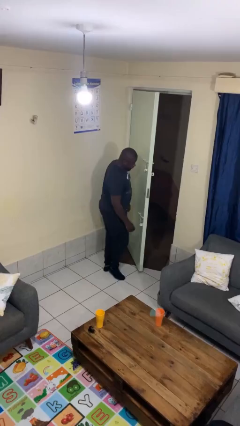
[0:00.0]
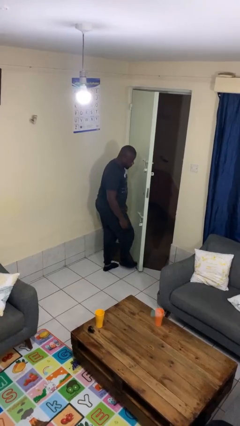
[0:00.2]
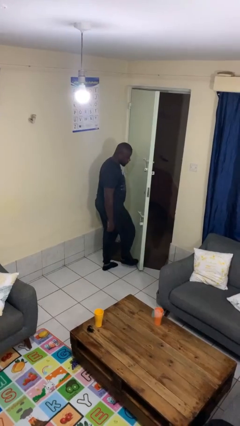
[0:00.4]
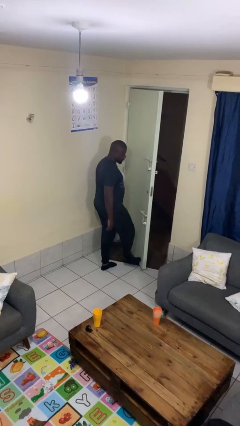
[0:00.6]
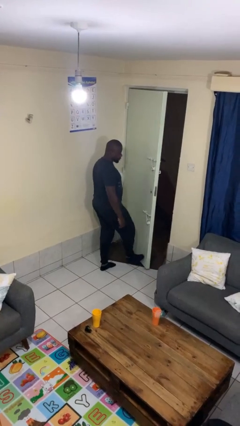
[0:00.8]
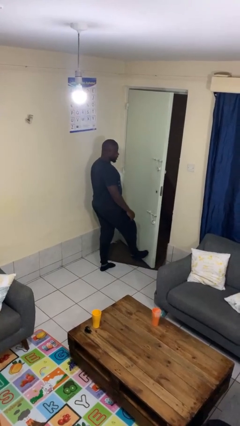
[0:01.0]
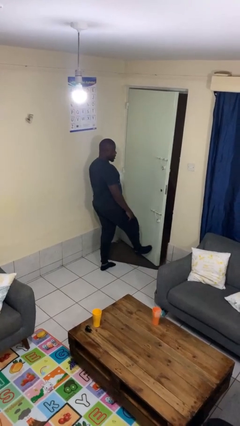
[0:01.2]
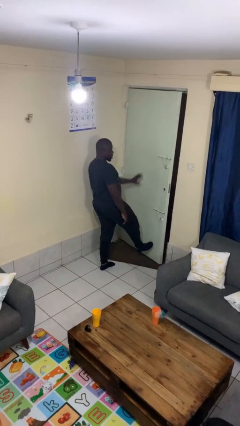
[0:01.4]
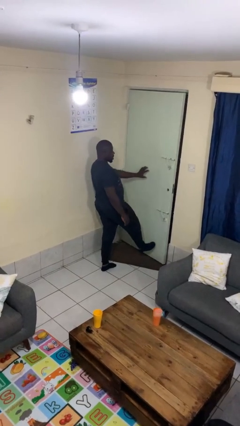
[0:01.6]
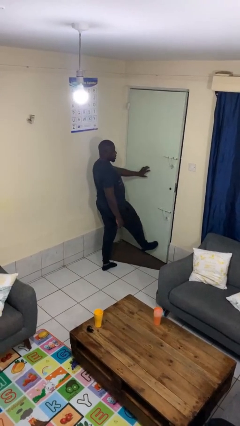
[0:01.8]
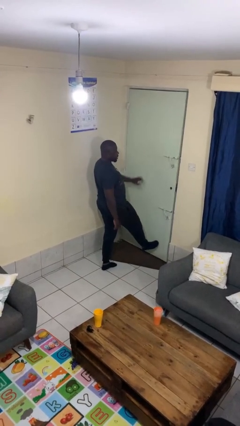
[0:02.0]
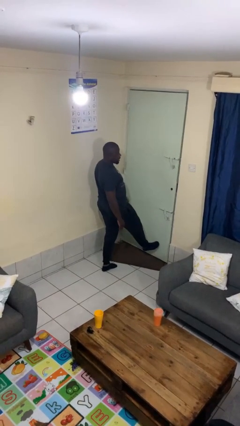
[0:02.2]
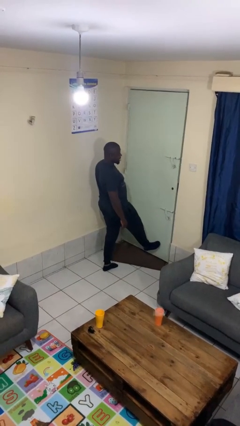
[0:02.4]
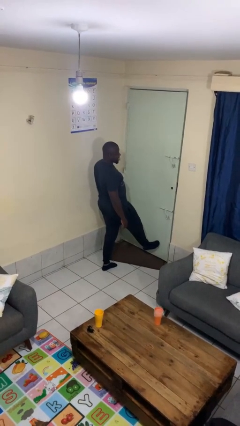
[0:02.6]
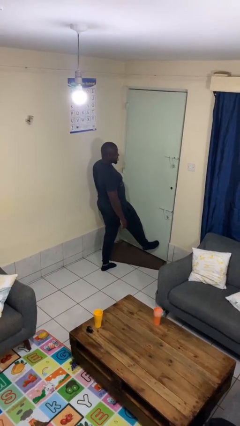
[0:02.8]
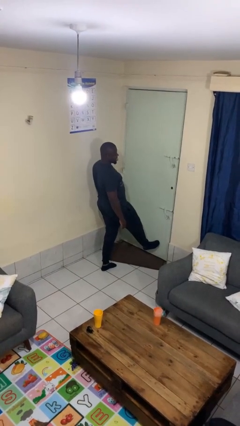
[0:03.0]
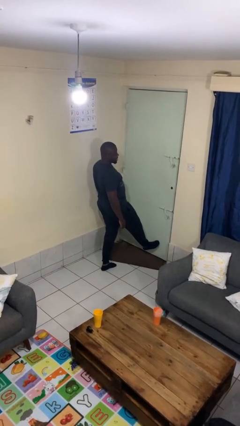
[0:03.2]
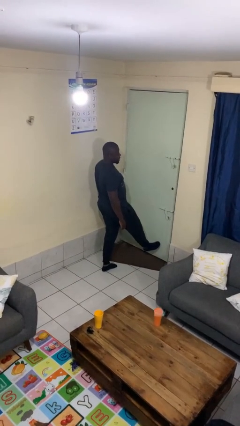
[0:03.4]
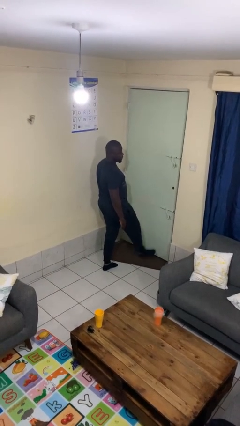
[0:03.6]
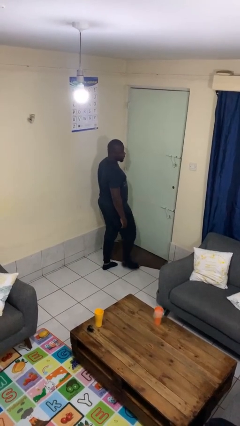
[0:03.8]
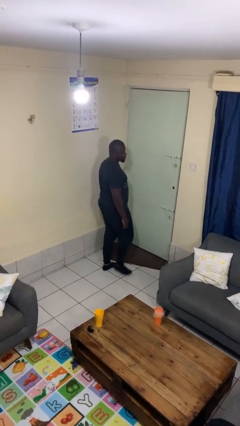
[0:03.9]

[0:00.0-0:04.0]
person closes door with foot

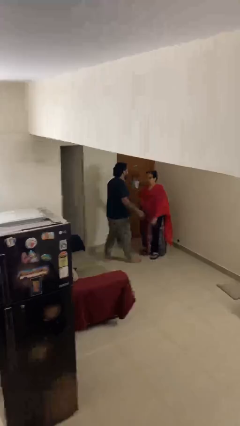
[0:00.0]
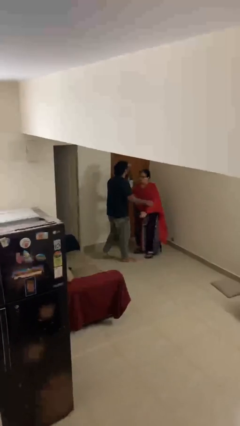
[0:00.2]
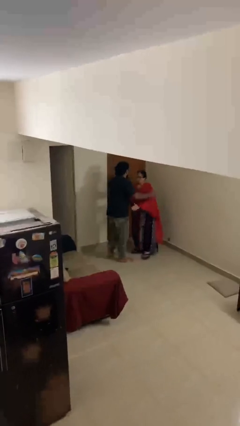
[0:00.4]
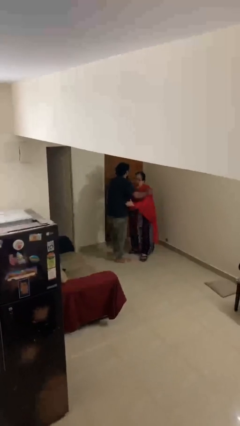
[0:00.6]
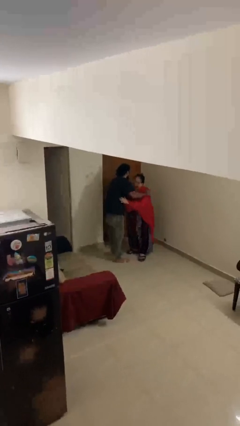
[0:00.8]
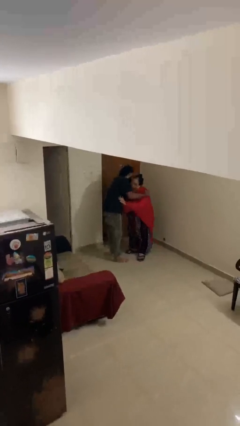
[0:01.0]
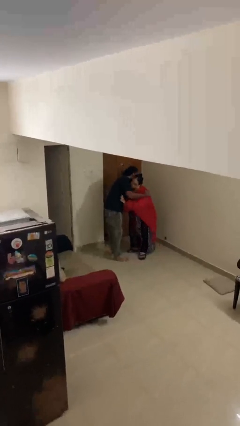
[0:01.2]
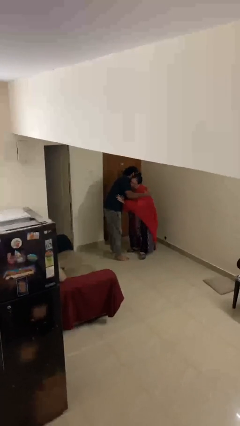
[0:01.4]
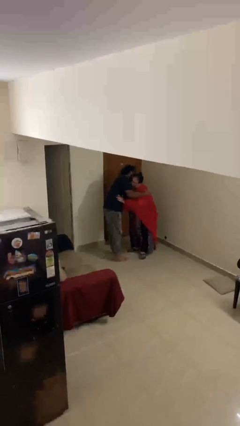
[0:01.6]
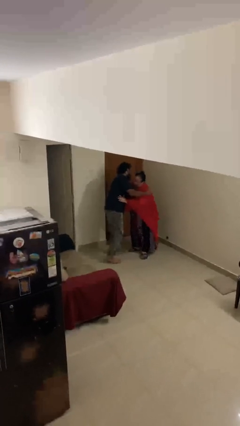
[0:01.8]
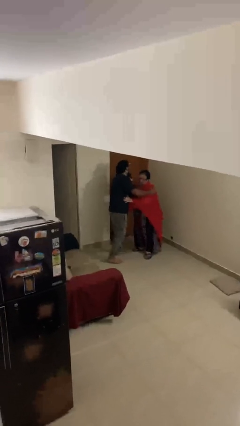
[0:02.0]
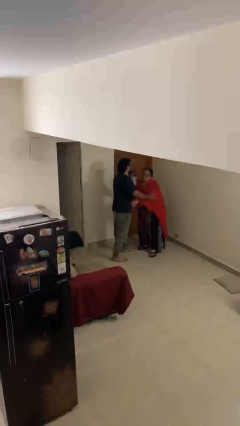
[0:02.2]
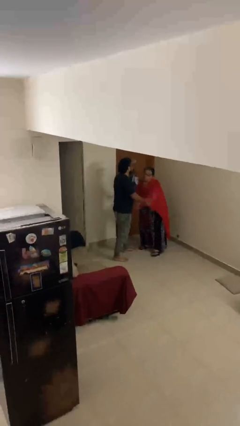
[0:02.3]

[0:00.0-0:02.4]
person embraces person

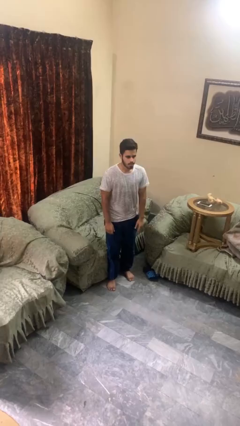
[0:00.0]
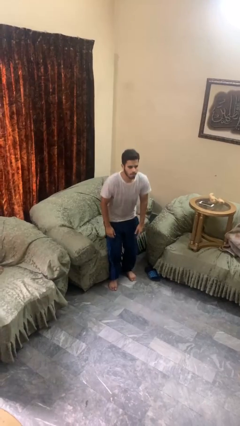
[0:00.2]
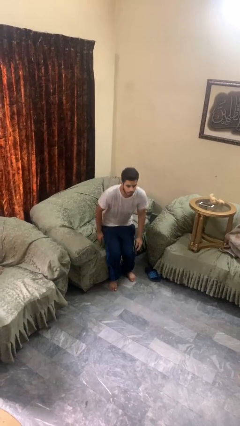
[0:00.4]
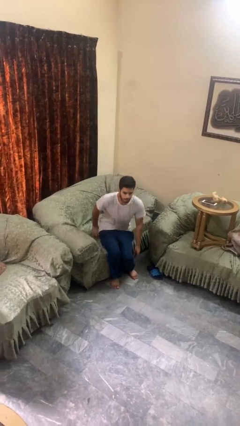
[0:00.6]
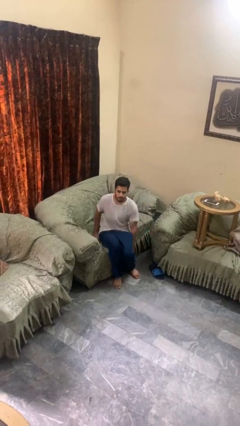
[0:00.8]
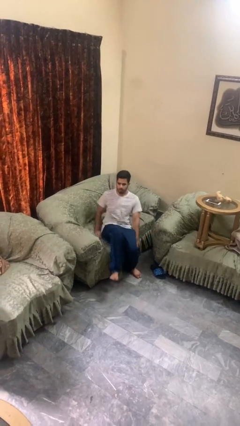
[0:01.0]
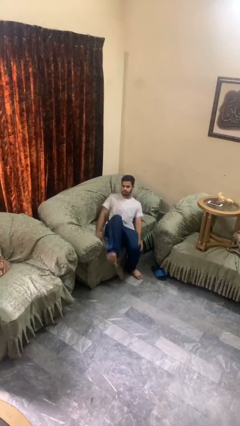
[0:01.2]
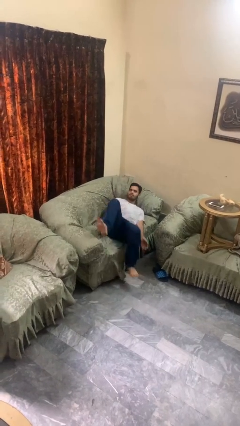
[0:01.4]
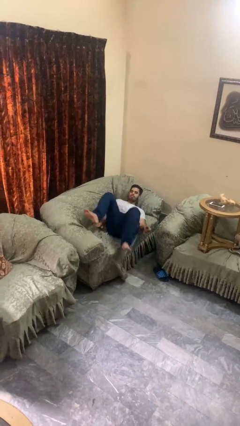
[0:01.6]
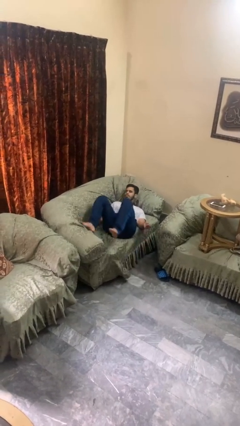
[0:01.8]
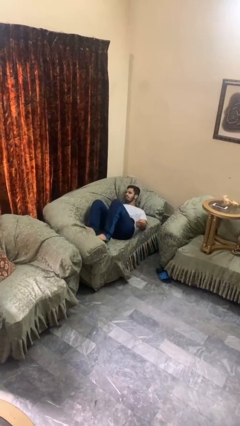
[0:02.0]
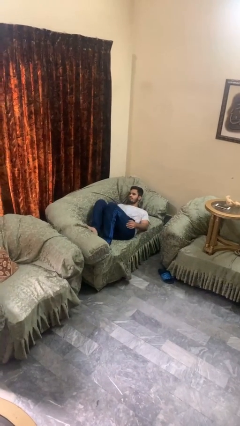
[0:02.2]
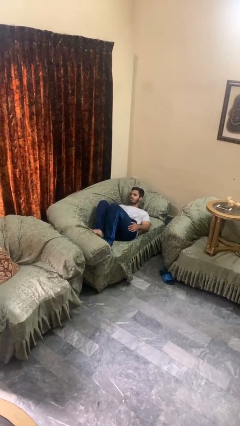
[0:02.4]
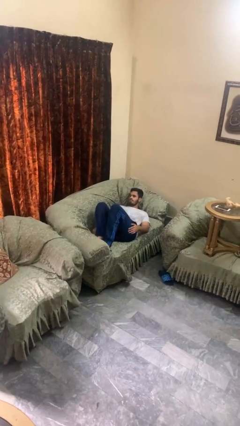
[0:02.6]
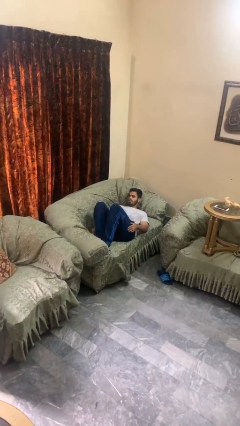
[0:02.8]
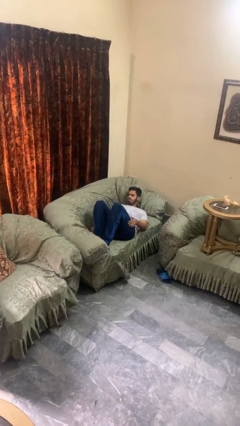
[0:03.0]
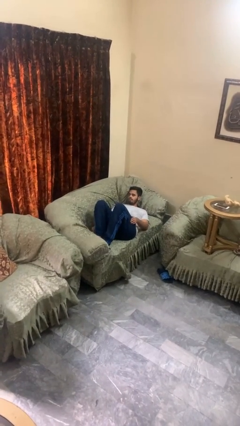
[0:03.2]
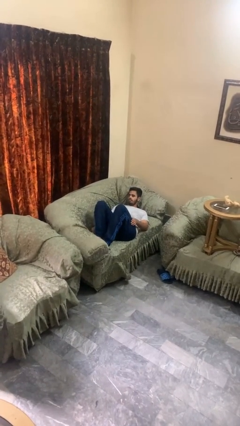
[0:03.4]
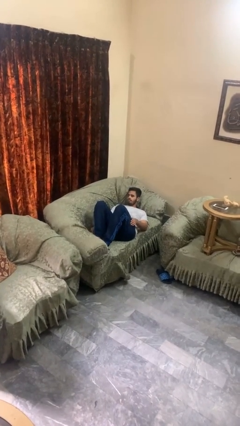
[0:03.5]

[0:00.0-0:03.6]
person lies down on couch

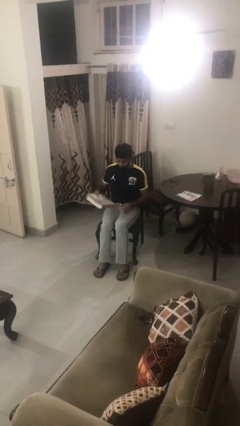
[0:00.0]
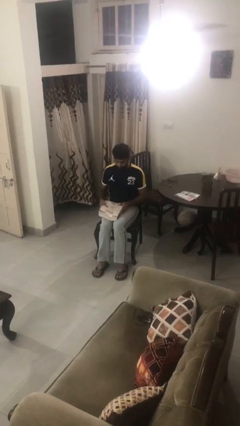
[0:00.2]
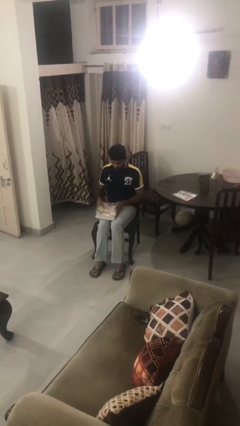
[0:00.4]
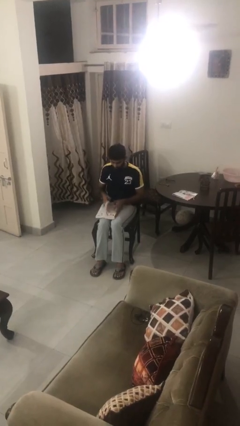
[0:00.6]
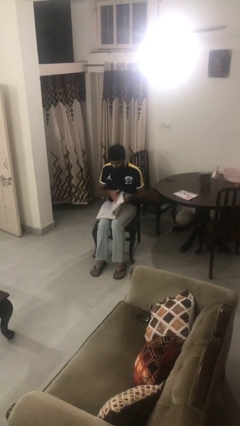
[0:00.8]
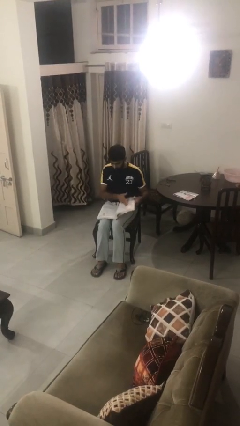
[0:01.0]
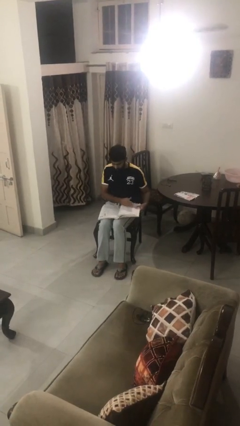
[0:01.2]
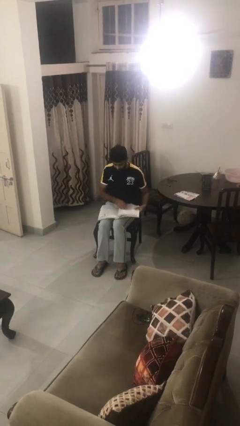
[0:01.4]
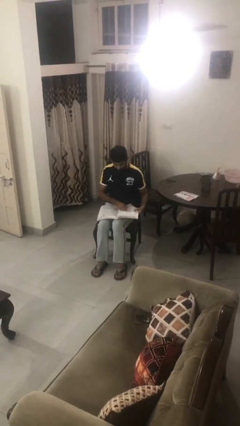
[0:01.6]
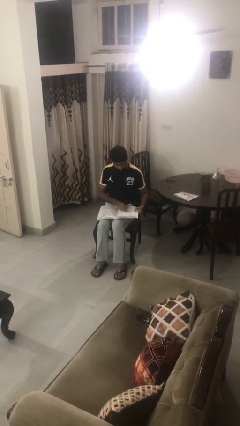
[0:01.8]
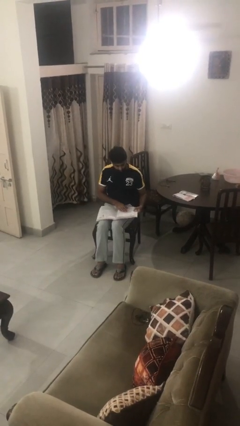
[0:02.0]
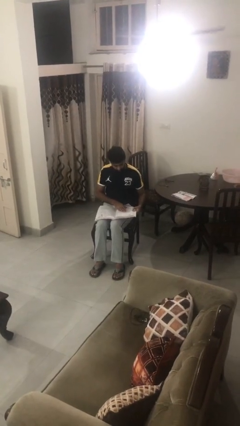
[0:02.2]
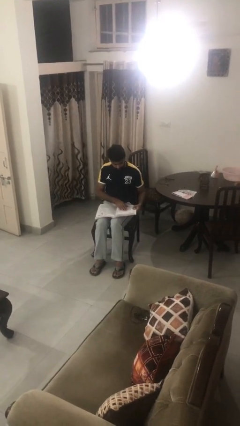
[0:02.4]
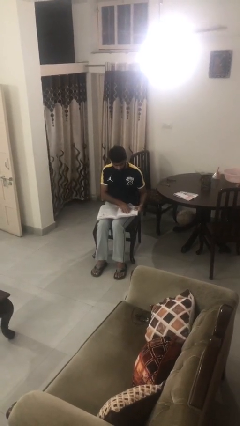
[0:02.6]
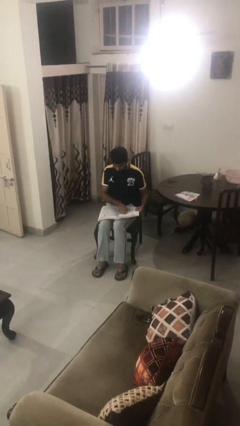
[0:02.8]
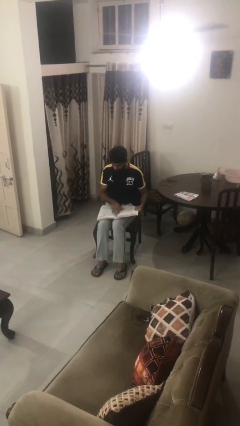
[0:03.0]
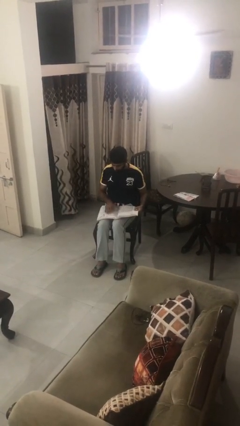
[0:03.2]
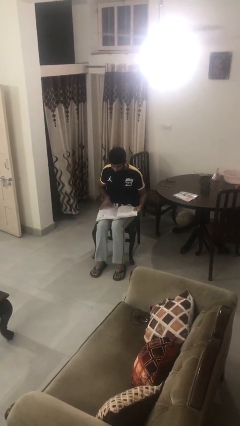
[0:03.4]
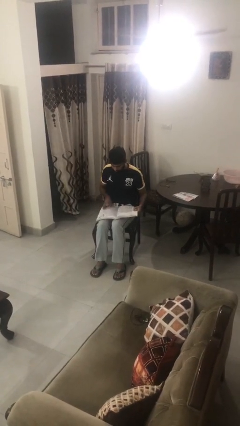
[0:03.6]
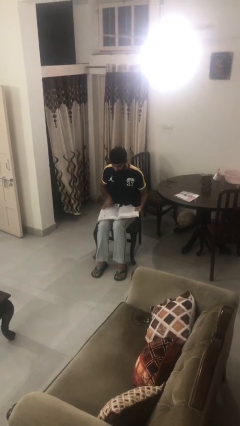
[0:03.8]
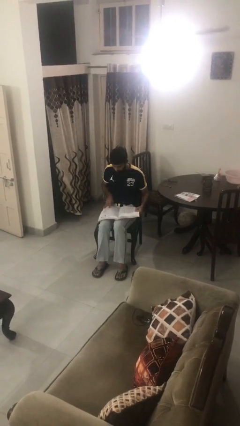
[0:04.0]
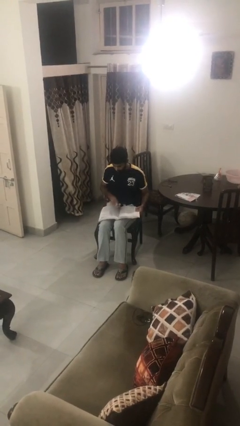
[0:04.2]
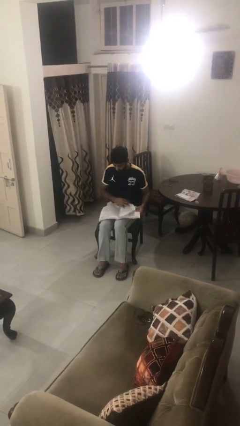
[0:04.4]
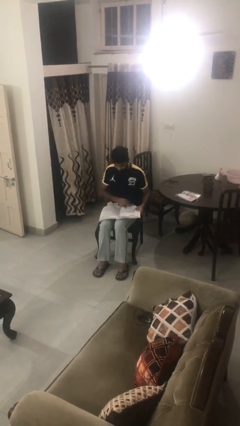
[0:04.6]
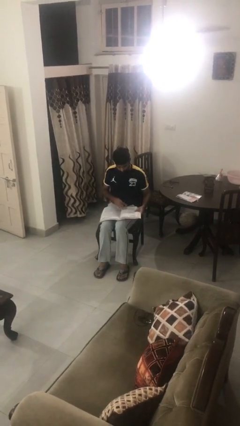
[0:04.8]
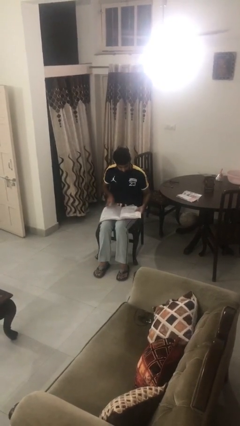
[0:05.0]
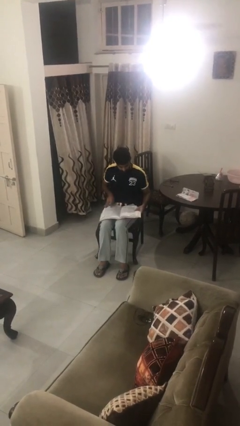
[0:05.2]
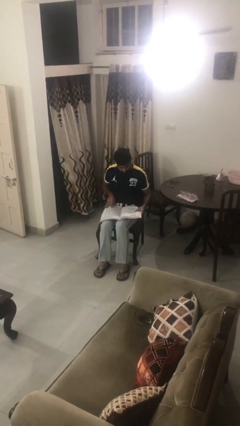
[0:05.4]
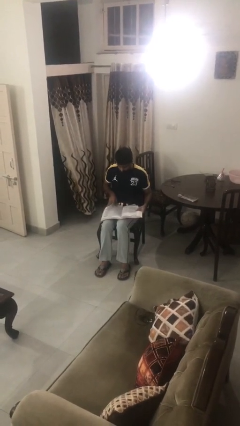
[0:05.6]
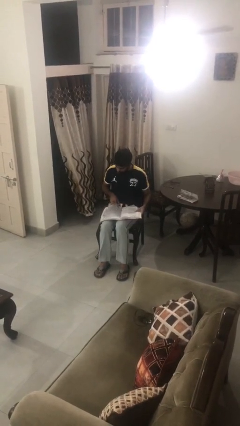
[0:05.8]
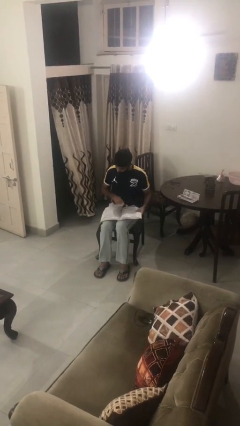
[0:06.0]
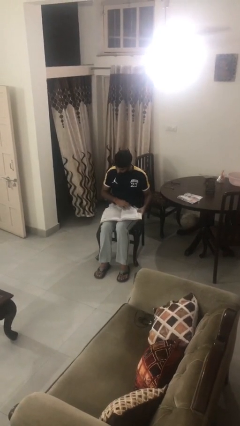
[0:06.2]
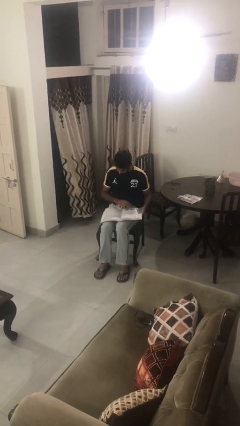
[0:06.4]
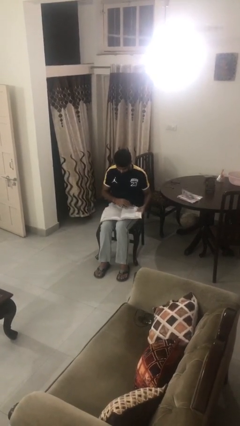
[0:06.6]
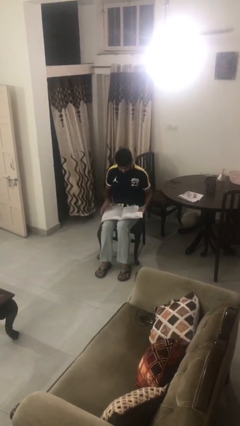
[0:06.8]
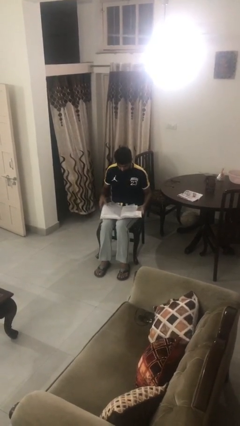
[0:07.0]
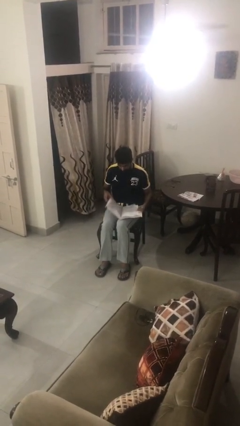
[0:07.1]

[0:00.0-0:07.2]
person reads book

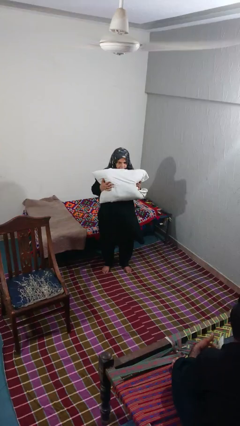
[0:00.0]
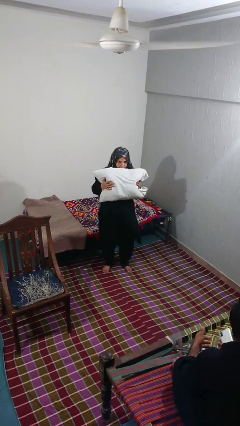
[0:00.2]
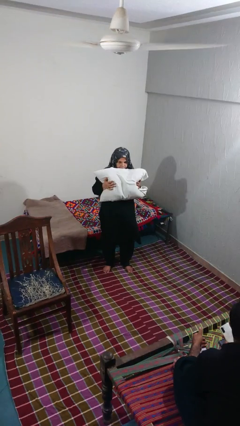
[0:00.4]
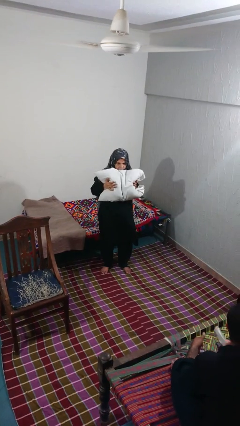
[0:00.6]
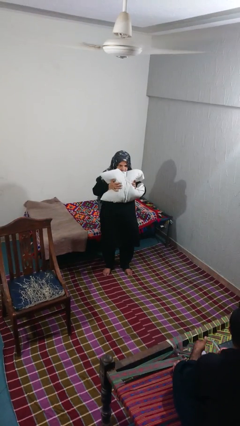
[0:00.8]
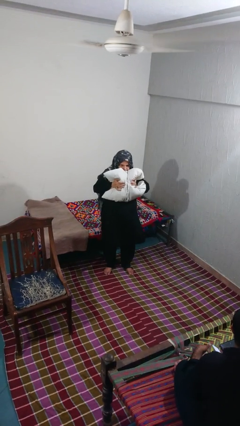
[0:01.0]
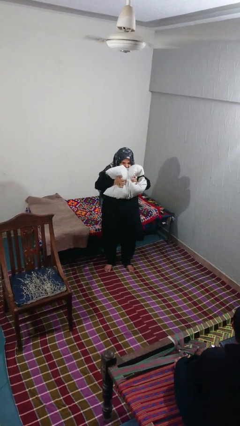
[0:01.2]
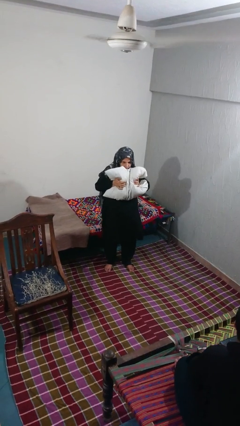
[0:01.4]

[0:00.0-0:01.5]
person squeezes object
